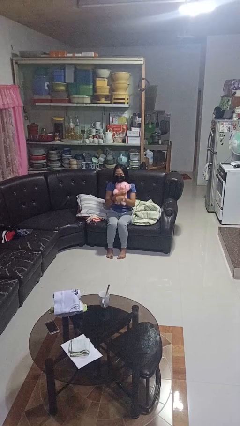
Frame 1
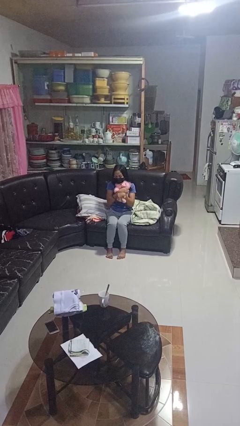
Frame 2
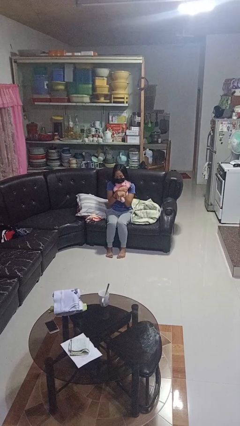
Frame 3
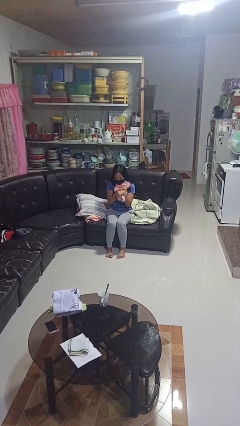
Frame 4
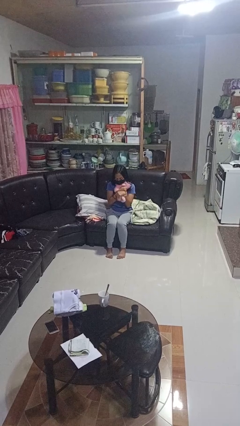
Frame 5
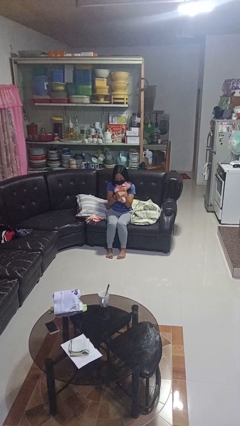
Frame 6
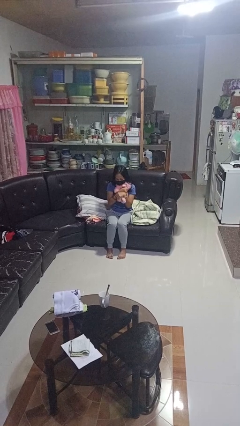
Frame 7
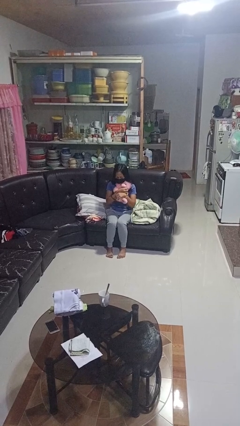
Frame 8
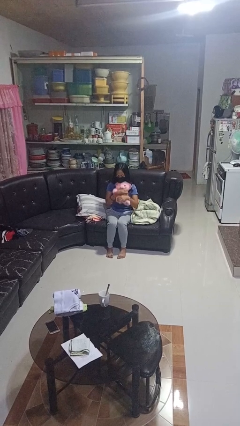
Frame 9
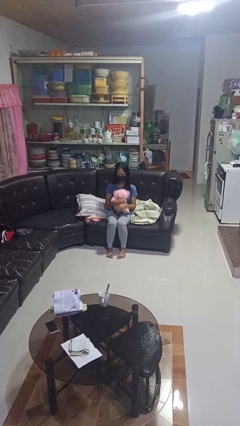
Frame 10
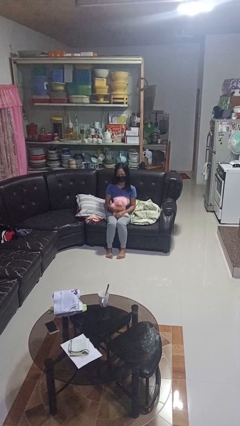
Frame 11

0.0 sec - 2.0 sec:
person hugs stuffed animal

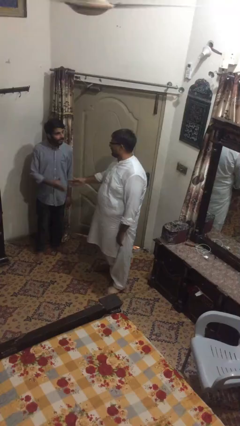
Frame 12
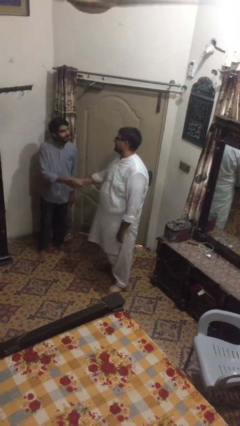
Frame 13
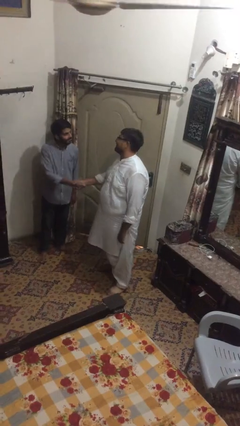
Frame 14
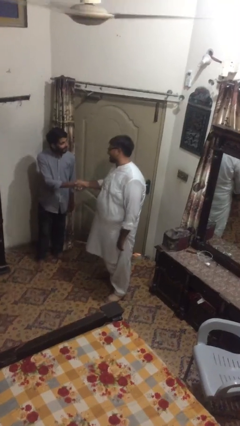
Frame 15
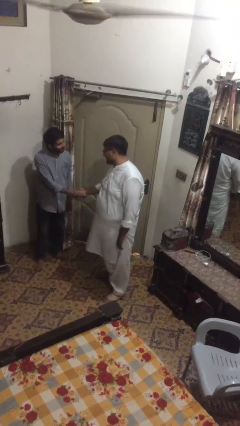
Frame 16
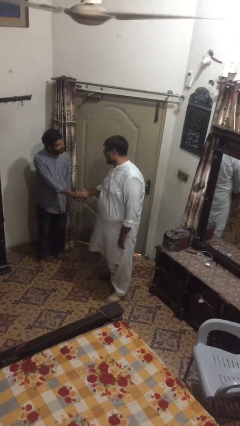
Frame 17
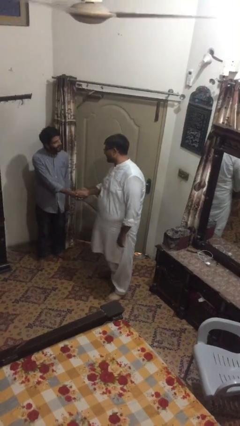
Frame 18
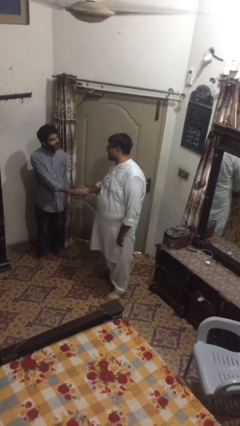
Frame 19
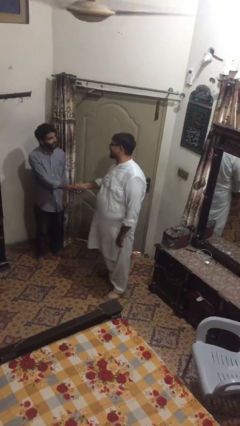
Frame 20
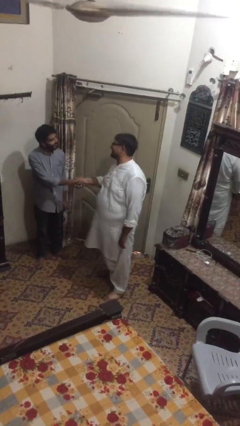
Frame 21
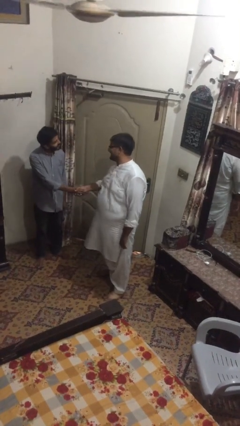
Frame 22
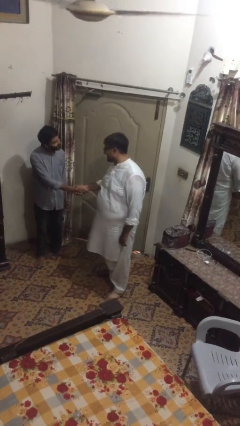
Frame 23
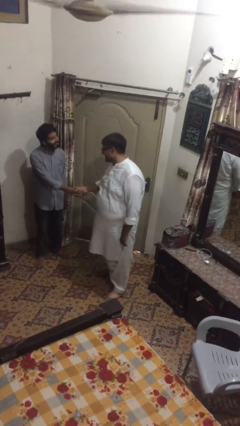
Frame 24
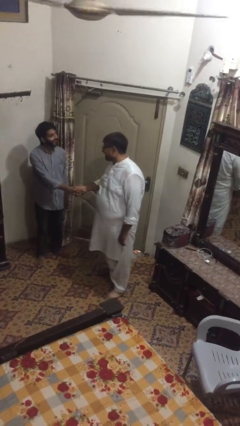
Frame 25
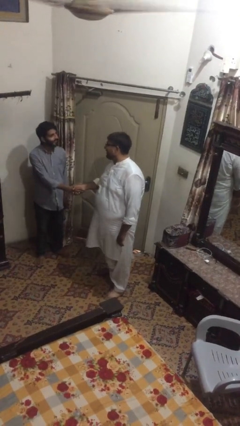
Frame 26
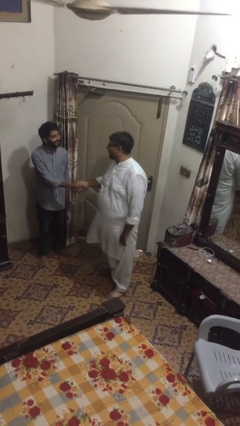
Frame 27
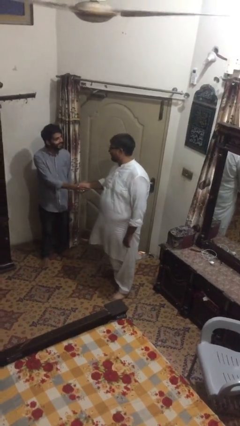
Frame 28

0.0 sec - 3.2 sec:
person shakes hand

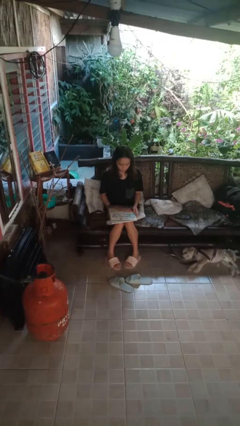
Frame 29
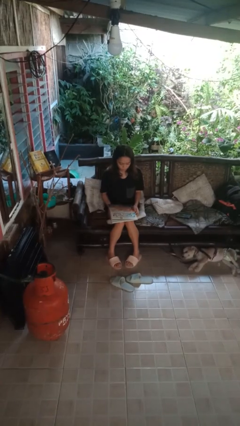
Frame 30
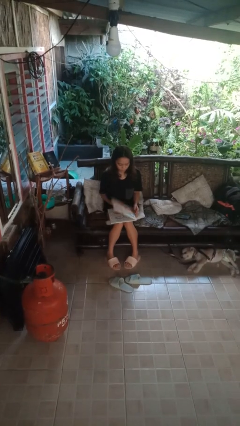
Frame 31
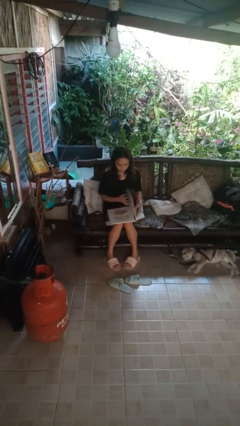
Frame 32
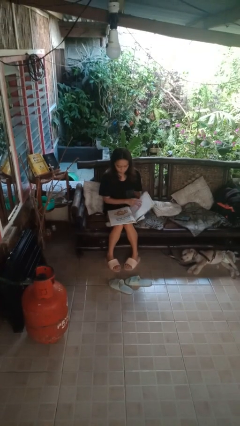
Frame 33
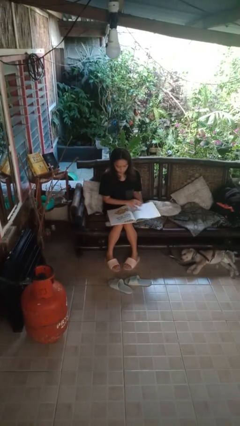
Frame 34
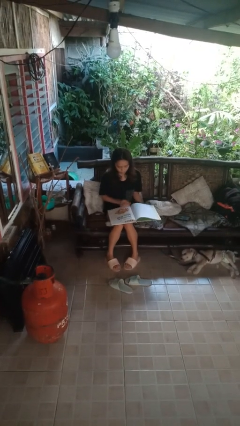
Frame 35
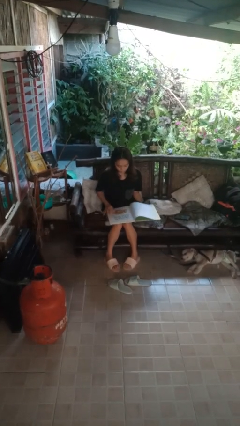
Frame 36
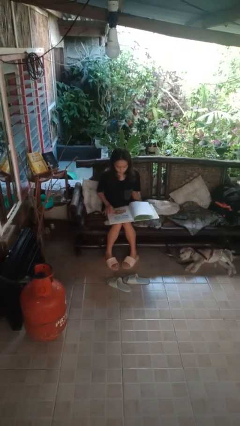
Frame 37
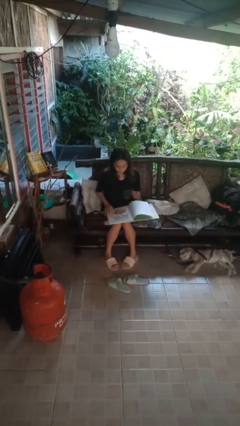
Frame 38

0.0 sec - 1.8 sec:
person reads book

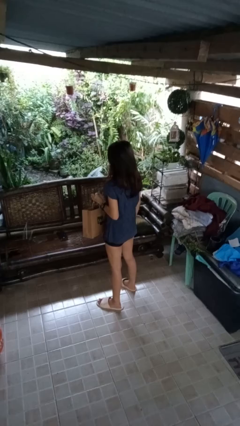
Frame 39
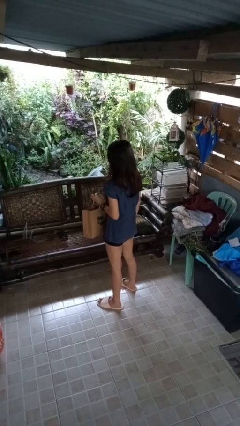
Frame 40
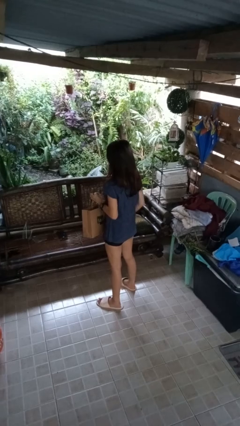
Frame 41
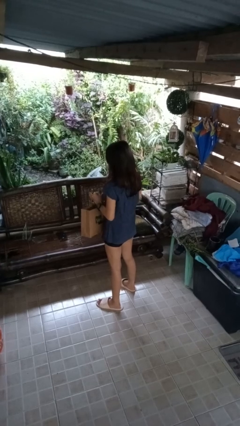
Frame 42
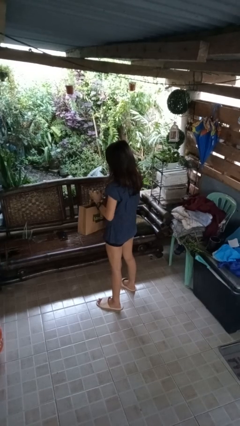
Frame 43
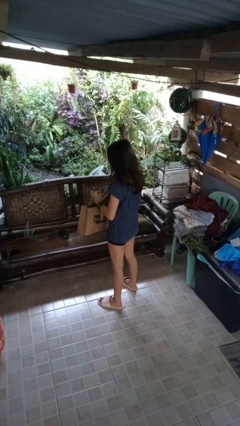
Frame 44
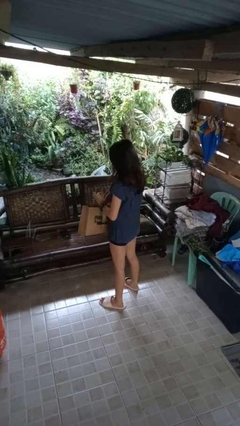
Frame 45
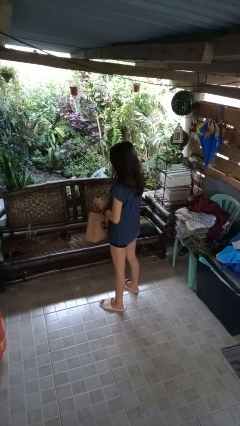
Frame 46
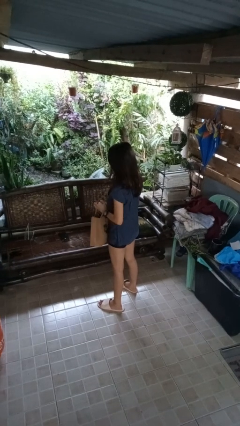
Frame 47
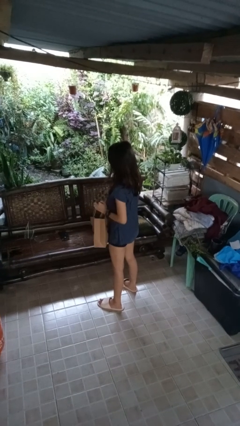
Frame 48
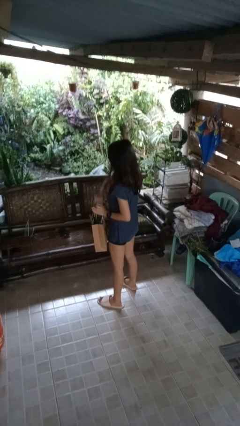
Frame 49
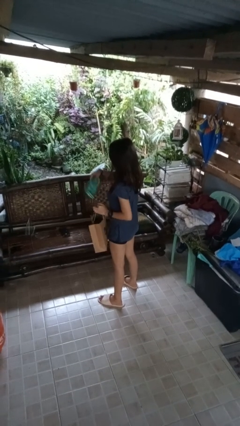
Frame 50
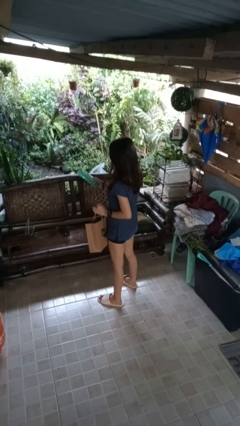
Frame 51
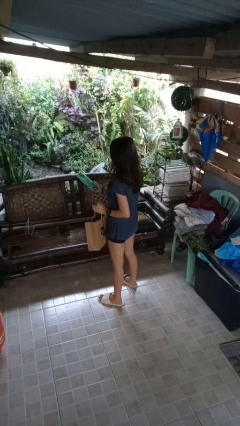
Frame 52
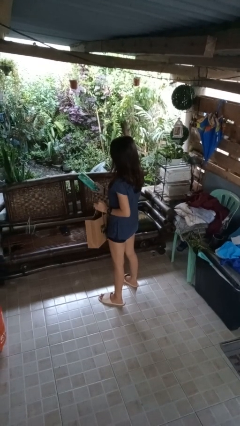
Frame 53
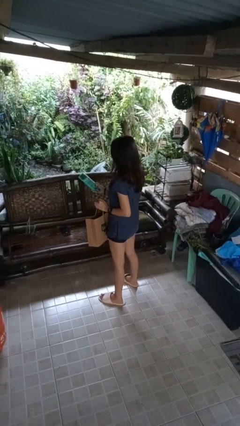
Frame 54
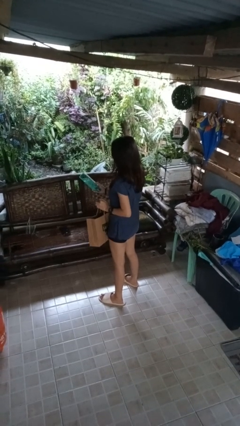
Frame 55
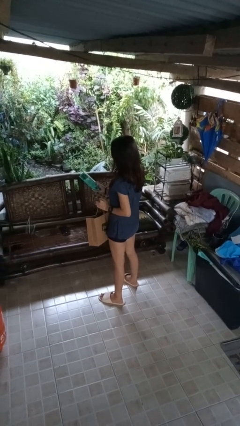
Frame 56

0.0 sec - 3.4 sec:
person takes object from bag

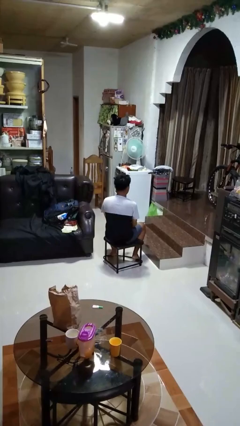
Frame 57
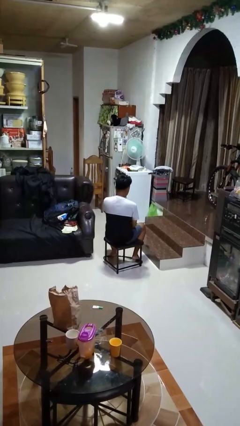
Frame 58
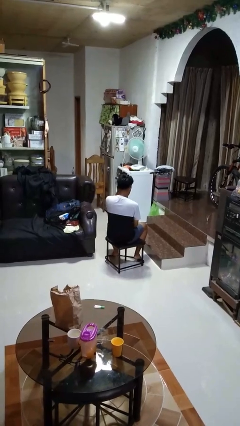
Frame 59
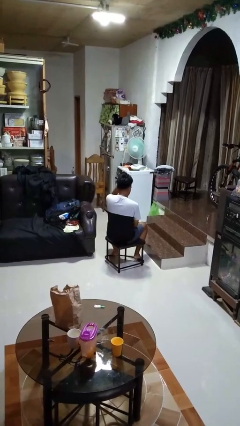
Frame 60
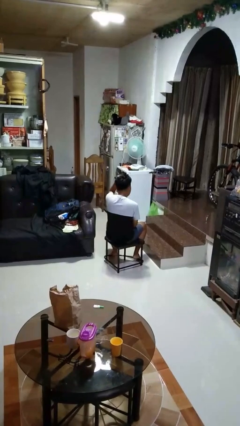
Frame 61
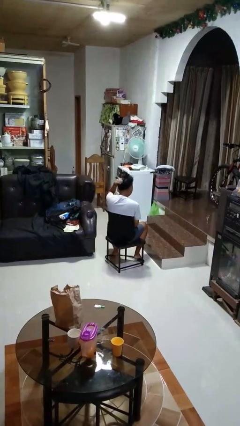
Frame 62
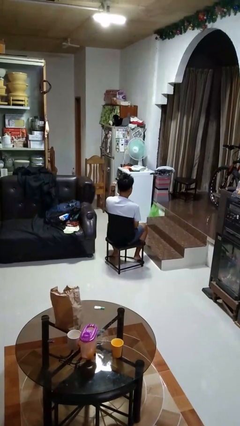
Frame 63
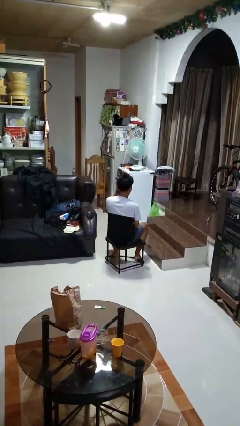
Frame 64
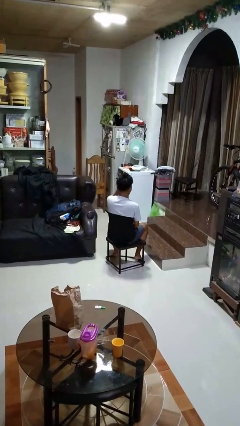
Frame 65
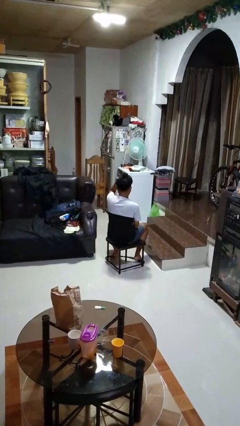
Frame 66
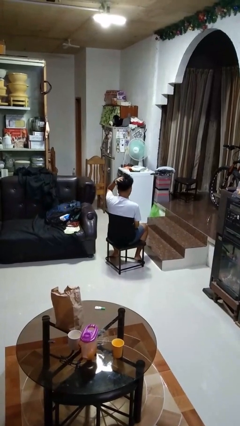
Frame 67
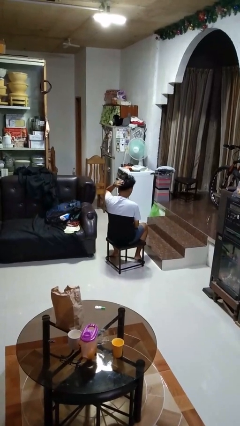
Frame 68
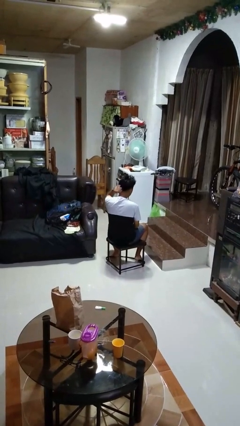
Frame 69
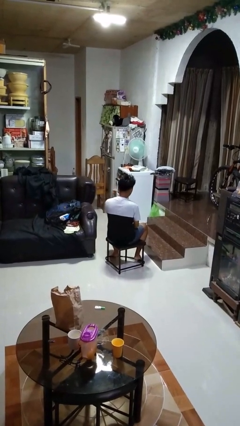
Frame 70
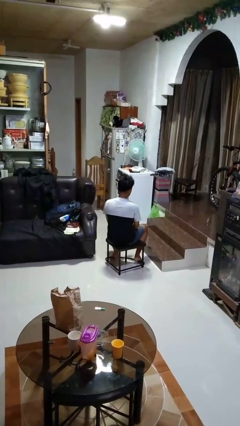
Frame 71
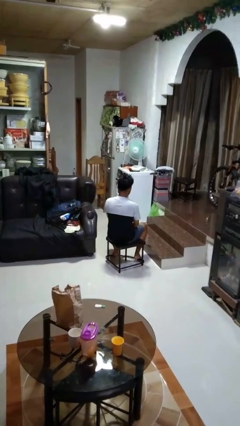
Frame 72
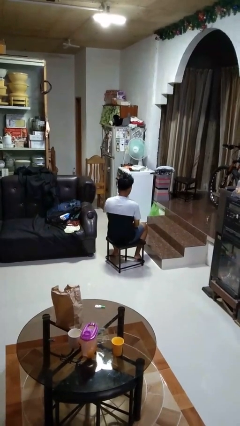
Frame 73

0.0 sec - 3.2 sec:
person strokes hair

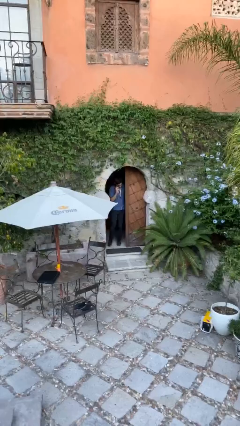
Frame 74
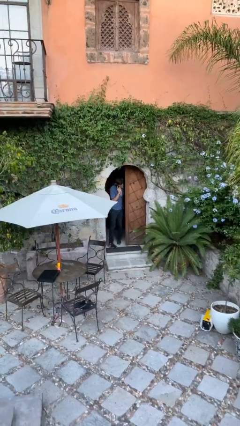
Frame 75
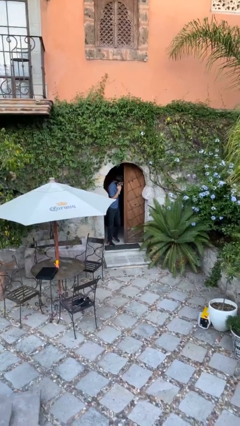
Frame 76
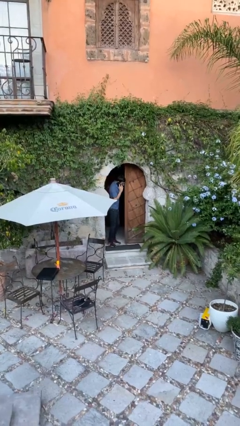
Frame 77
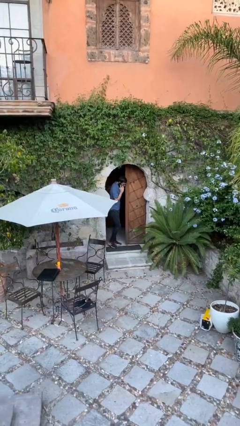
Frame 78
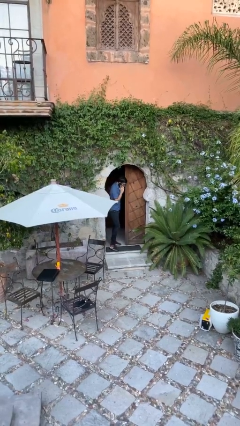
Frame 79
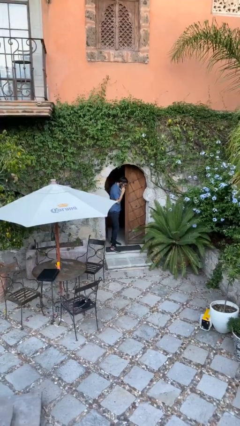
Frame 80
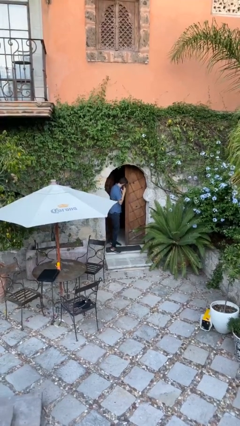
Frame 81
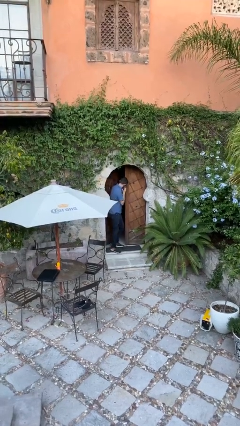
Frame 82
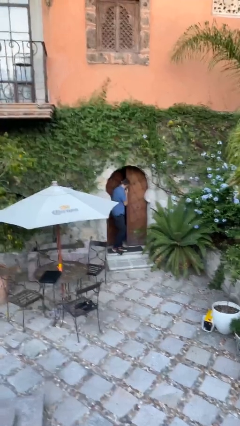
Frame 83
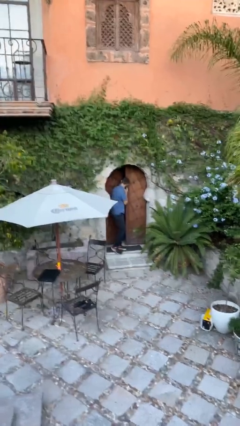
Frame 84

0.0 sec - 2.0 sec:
person enters scene through structure

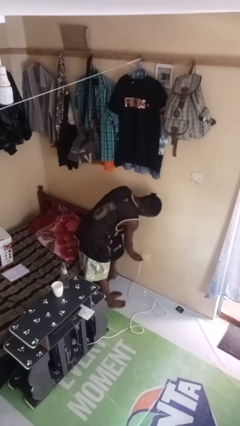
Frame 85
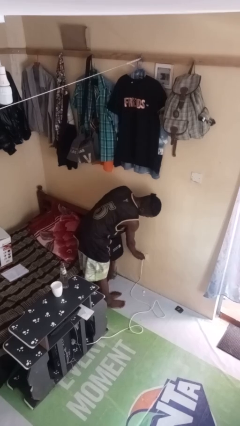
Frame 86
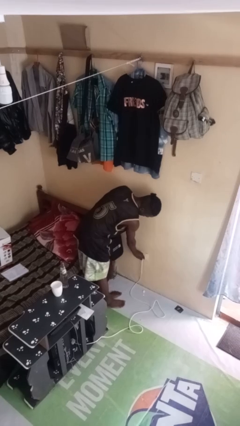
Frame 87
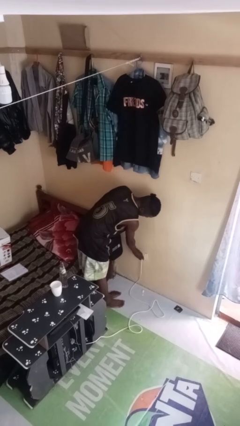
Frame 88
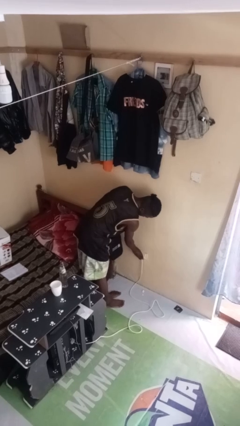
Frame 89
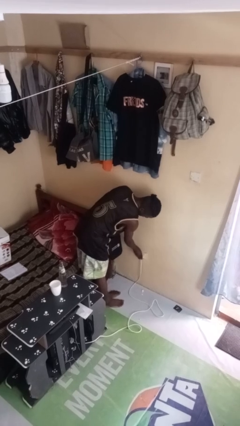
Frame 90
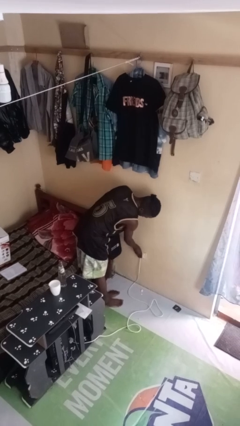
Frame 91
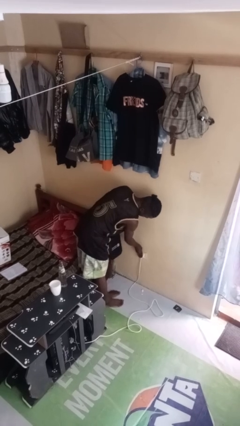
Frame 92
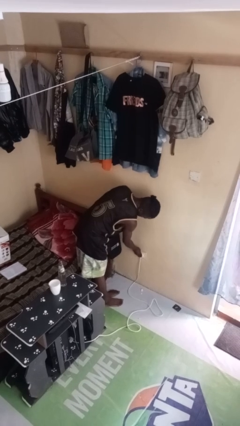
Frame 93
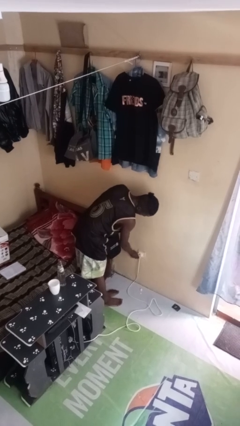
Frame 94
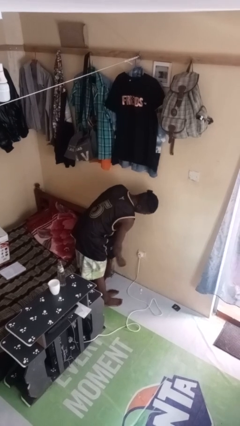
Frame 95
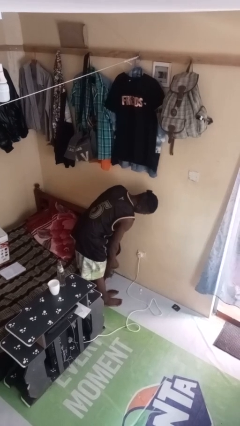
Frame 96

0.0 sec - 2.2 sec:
person plugs into electrical socket
